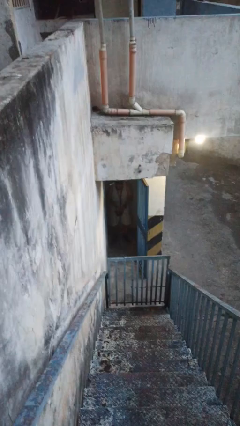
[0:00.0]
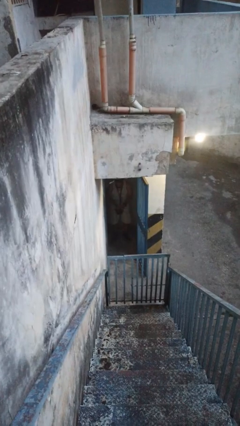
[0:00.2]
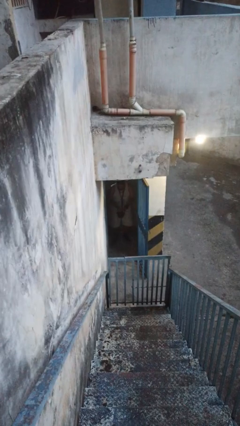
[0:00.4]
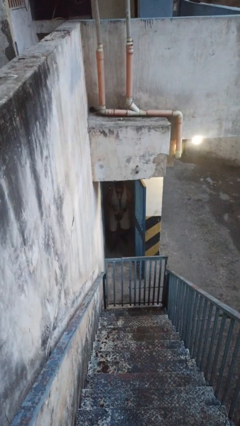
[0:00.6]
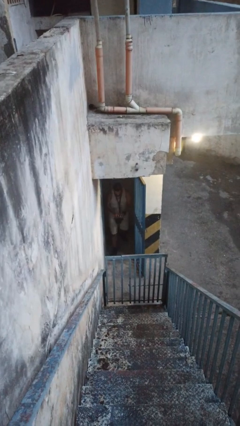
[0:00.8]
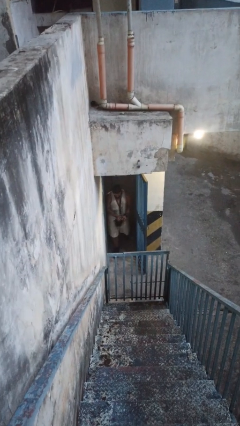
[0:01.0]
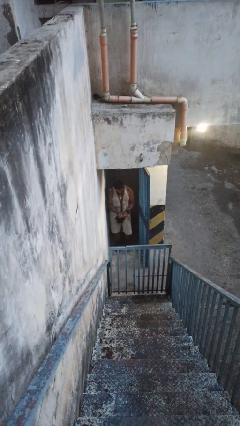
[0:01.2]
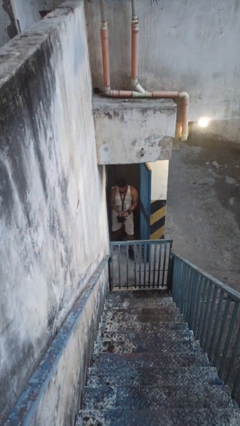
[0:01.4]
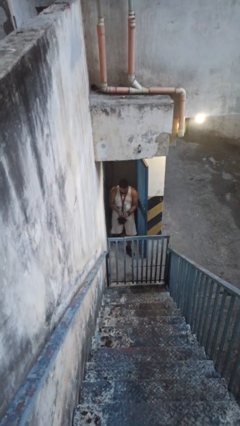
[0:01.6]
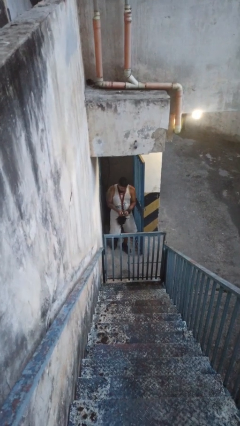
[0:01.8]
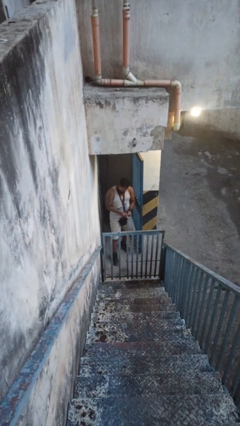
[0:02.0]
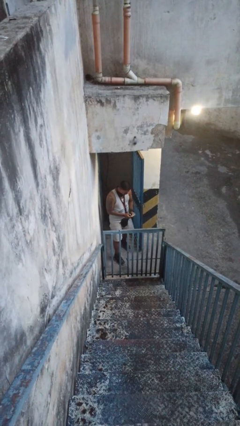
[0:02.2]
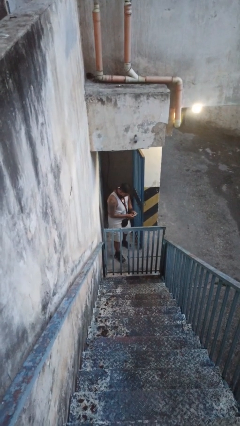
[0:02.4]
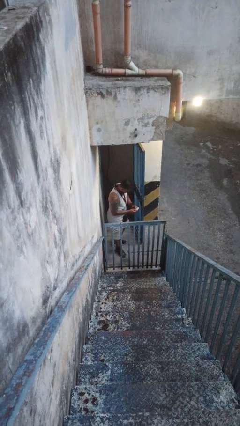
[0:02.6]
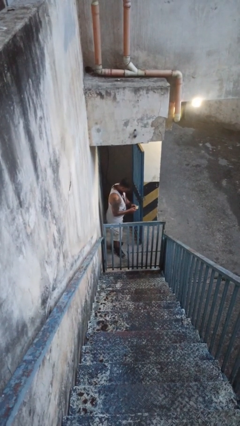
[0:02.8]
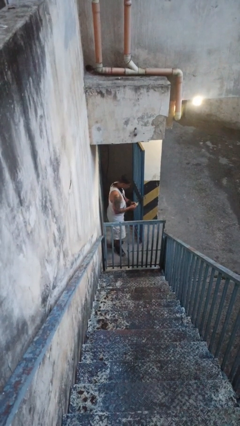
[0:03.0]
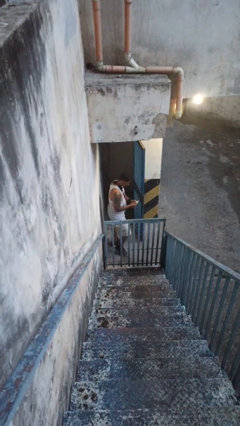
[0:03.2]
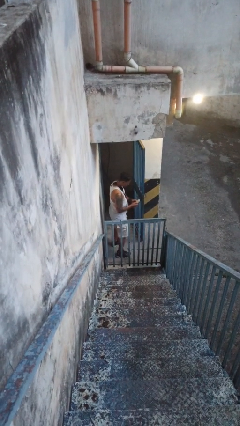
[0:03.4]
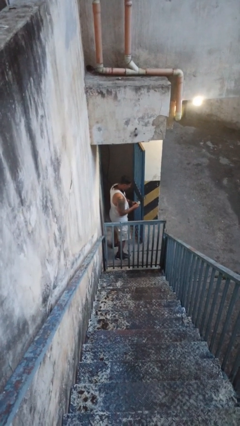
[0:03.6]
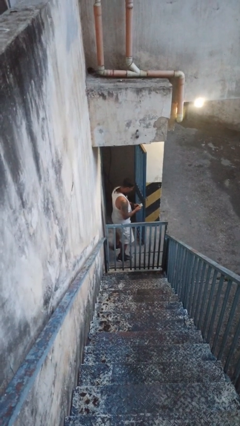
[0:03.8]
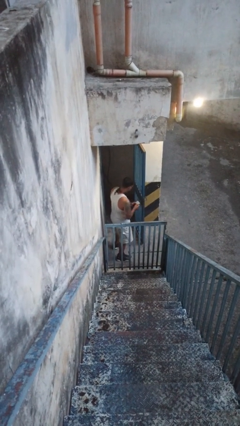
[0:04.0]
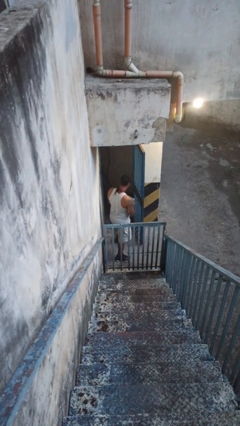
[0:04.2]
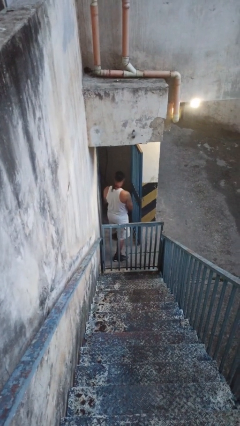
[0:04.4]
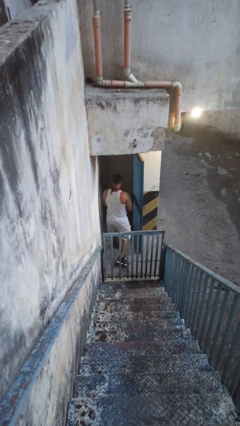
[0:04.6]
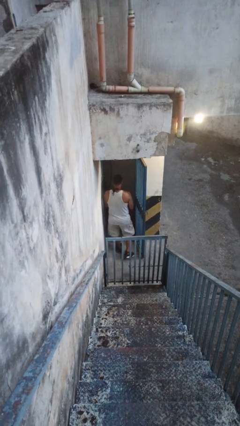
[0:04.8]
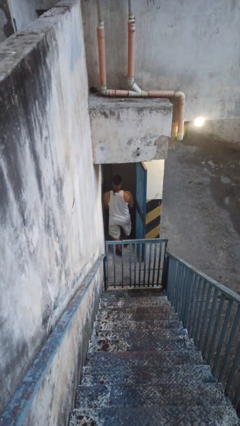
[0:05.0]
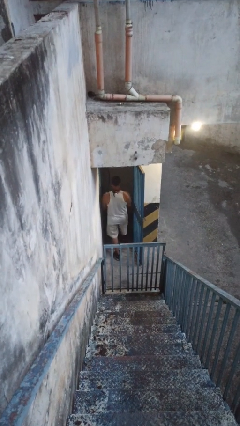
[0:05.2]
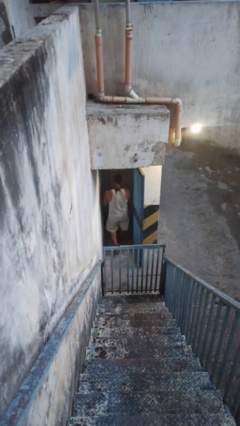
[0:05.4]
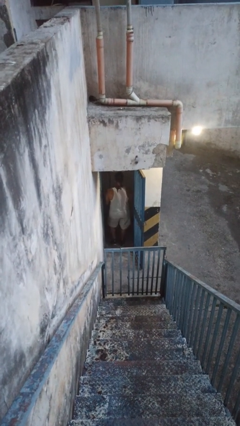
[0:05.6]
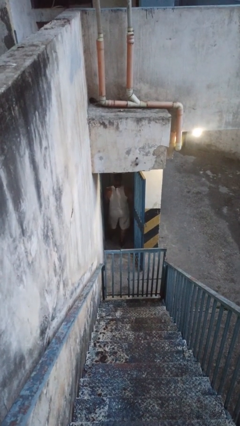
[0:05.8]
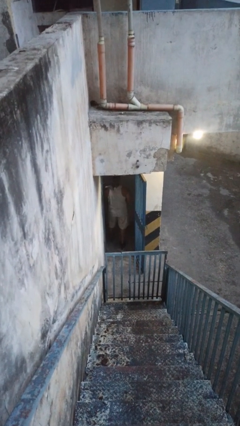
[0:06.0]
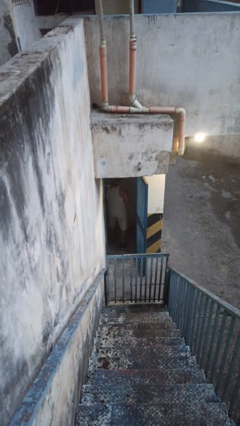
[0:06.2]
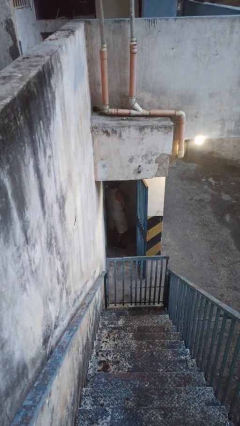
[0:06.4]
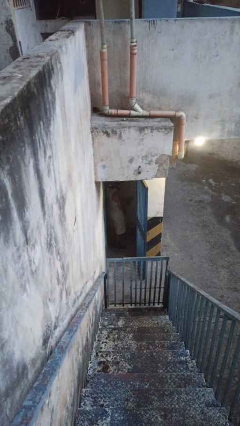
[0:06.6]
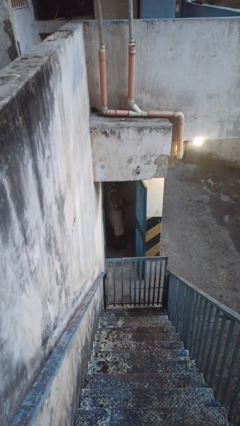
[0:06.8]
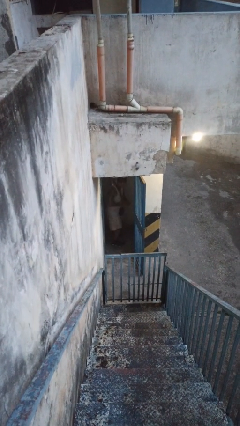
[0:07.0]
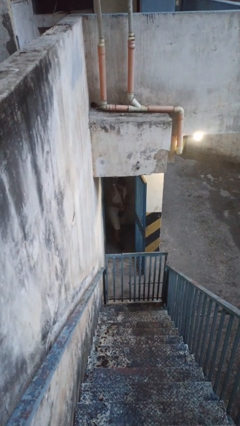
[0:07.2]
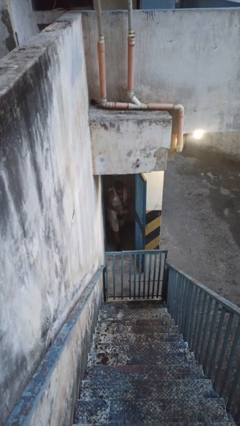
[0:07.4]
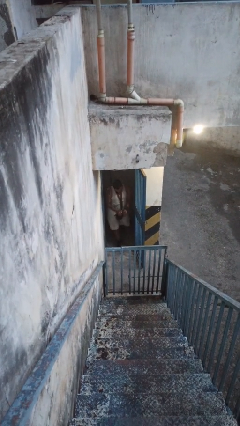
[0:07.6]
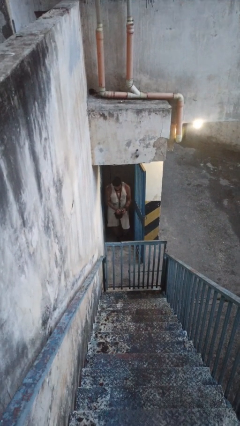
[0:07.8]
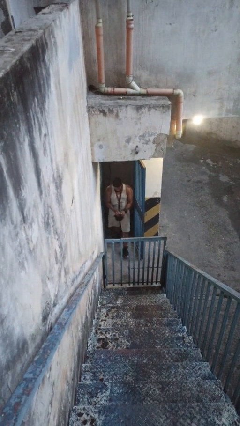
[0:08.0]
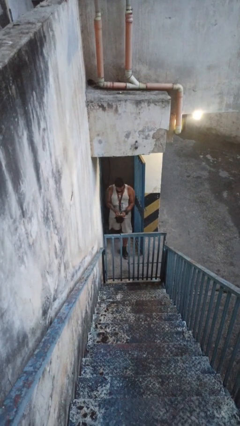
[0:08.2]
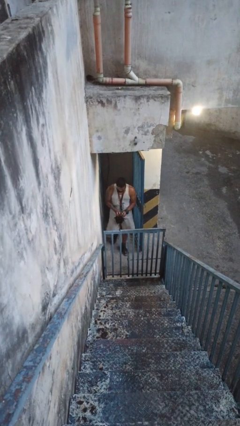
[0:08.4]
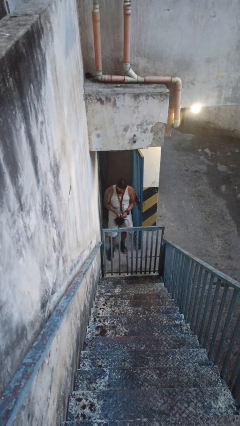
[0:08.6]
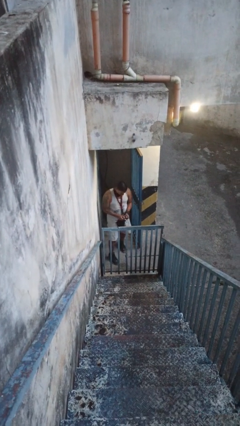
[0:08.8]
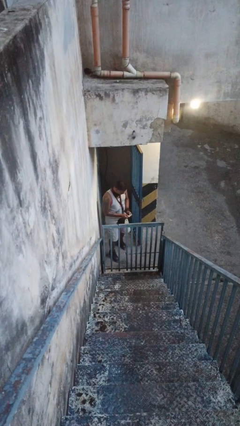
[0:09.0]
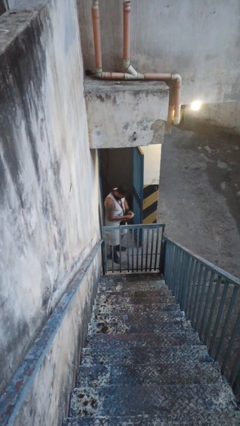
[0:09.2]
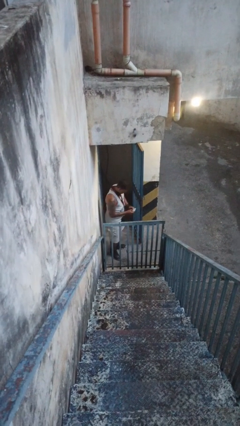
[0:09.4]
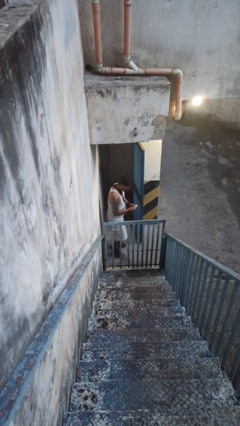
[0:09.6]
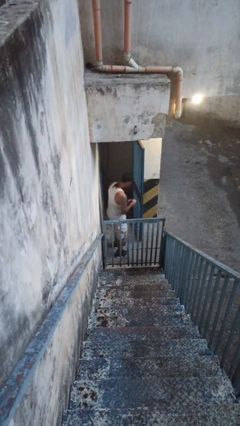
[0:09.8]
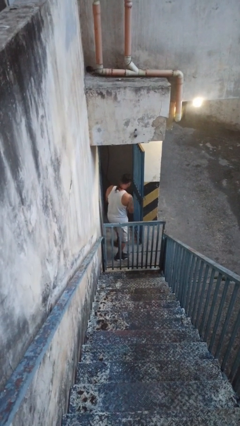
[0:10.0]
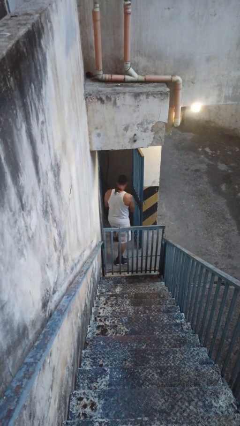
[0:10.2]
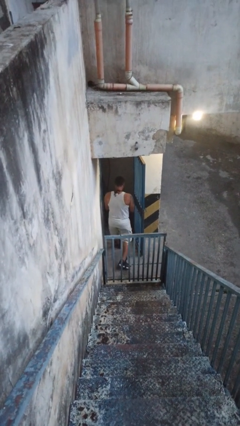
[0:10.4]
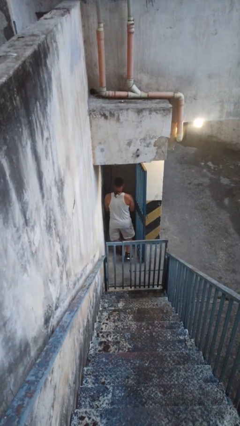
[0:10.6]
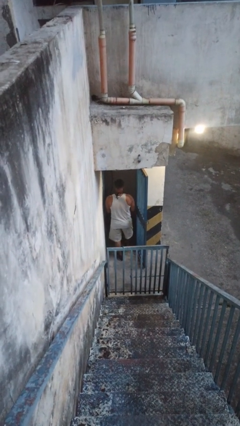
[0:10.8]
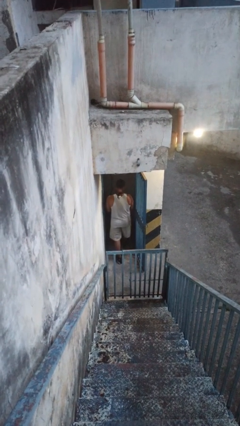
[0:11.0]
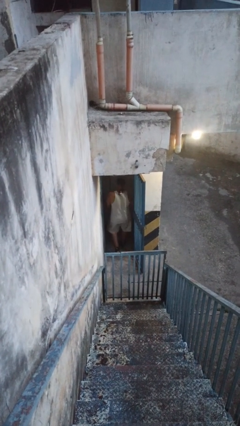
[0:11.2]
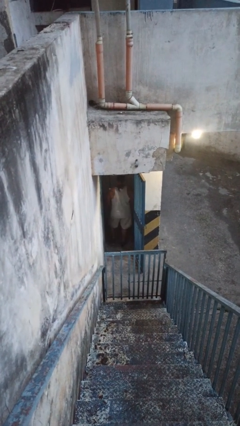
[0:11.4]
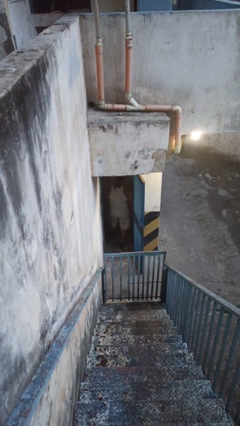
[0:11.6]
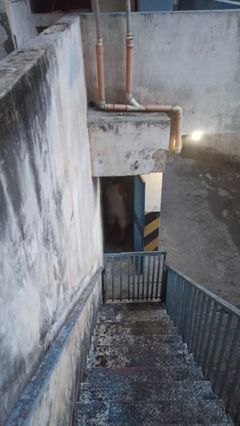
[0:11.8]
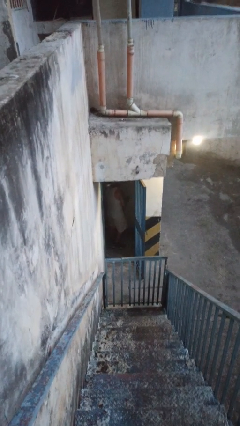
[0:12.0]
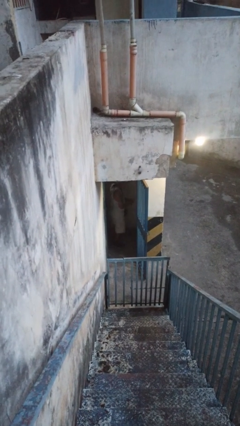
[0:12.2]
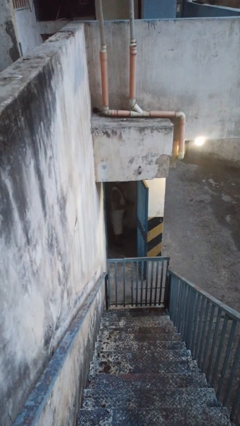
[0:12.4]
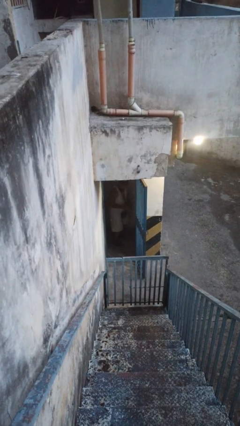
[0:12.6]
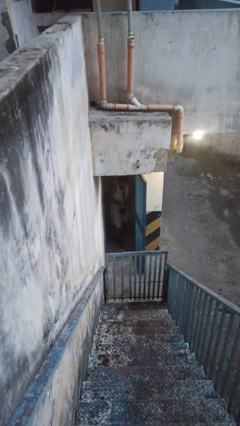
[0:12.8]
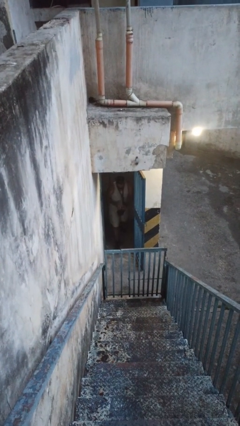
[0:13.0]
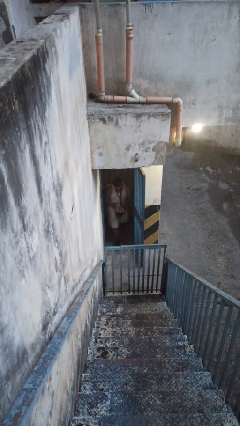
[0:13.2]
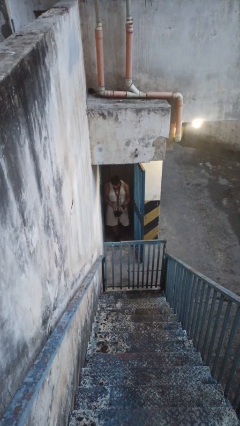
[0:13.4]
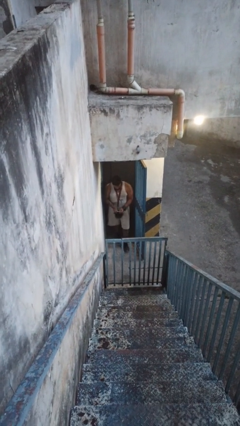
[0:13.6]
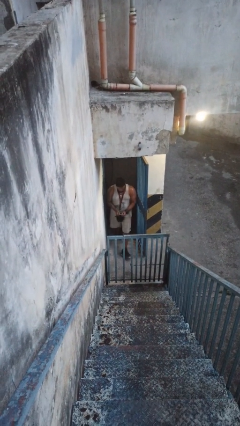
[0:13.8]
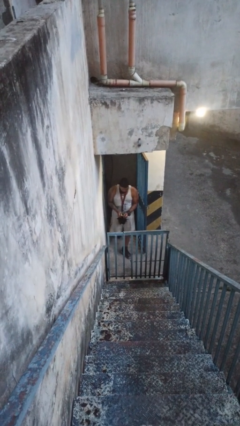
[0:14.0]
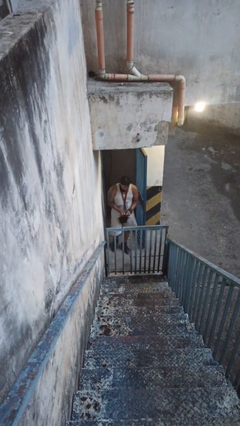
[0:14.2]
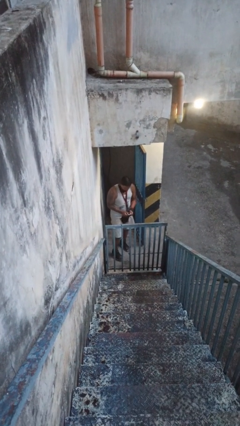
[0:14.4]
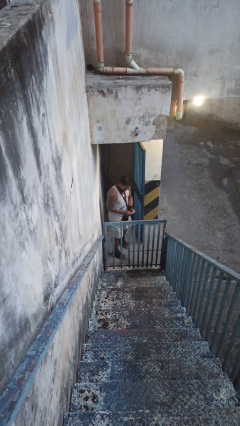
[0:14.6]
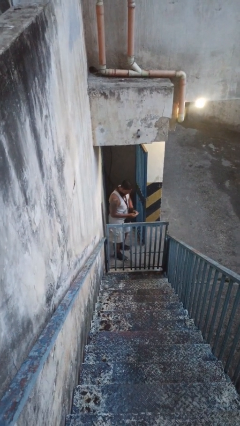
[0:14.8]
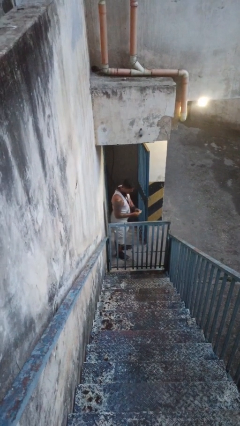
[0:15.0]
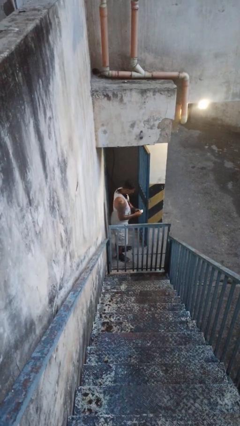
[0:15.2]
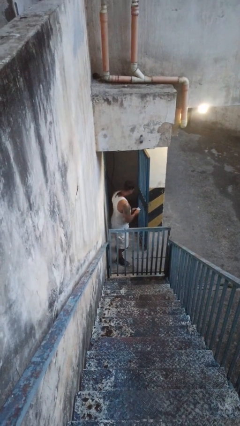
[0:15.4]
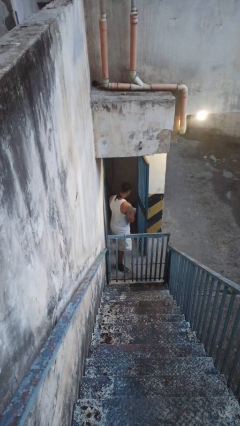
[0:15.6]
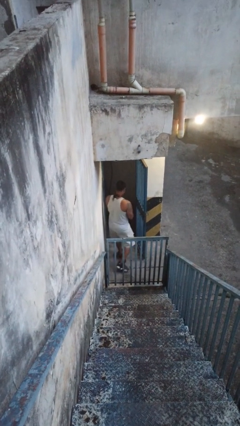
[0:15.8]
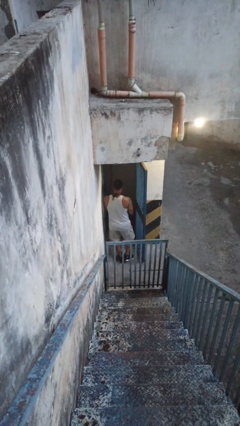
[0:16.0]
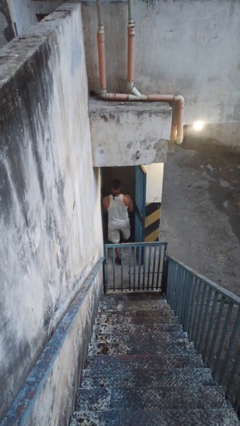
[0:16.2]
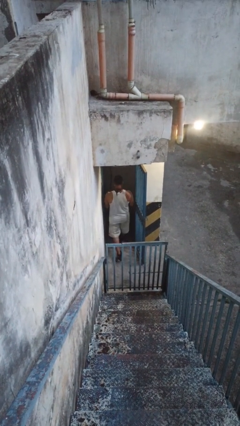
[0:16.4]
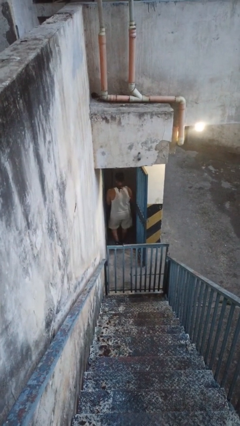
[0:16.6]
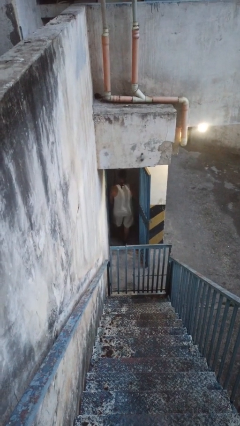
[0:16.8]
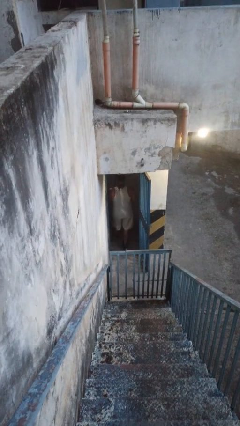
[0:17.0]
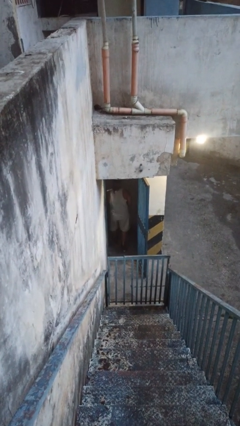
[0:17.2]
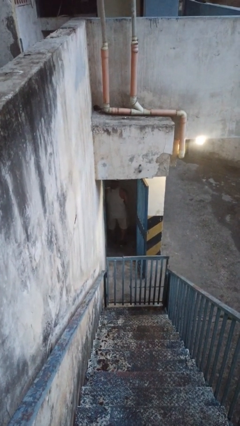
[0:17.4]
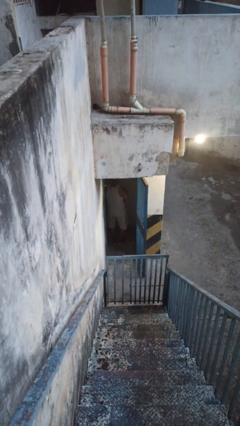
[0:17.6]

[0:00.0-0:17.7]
person texts on phone

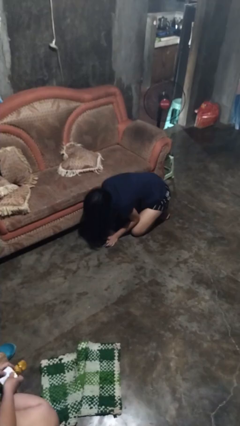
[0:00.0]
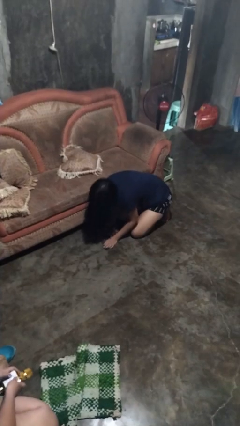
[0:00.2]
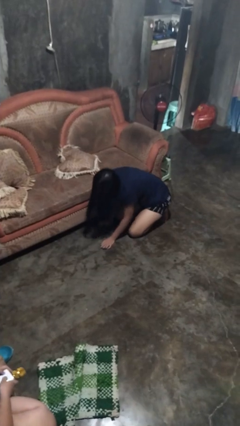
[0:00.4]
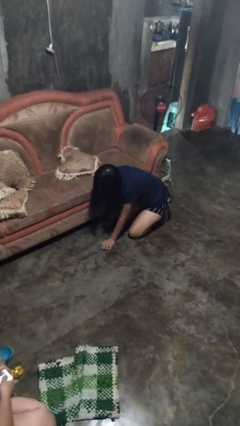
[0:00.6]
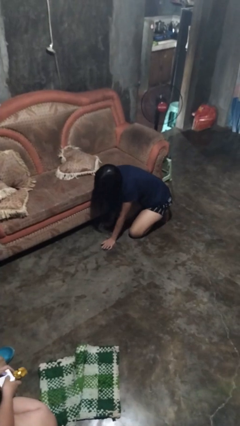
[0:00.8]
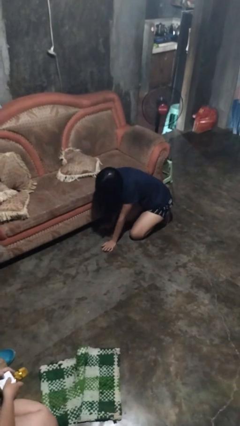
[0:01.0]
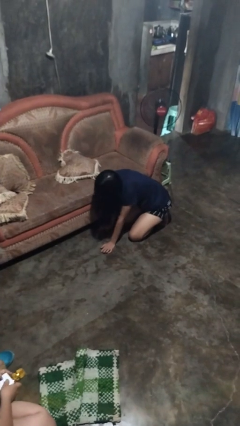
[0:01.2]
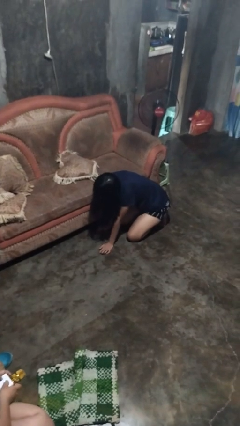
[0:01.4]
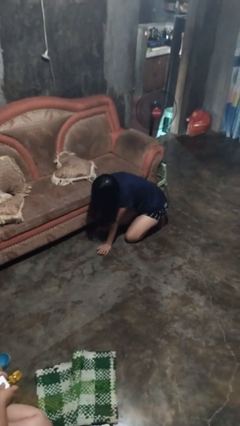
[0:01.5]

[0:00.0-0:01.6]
person searches under couch
